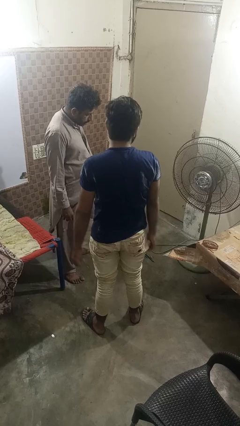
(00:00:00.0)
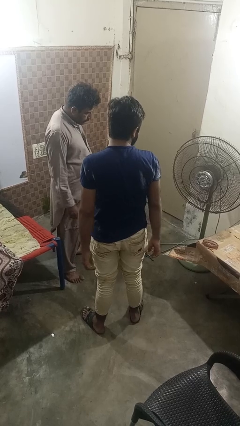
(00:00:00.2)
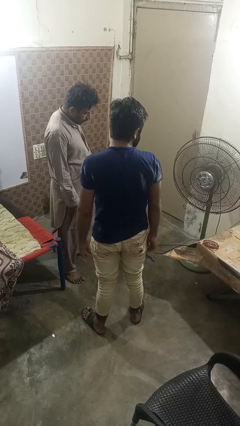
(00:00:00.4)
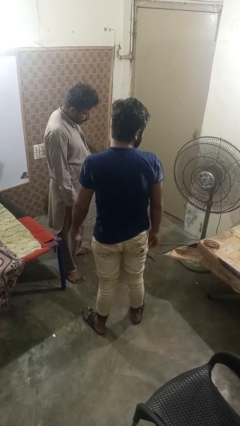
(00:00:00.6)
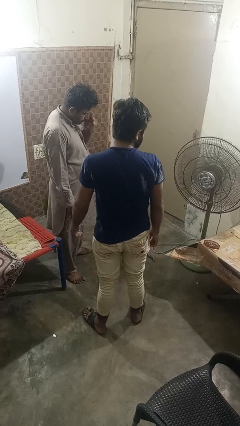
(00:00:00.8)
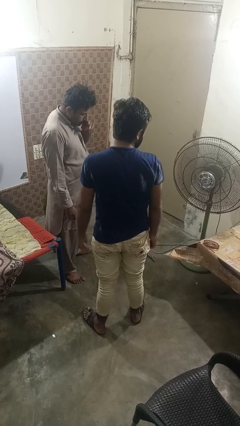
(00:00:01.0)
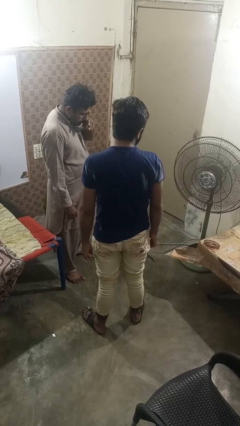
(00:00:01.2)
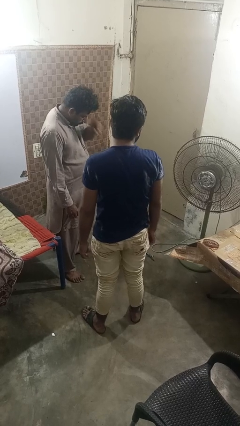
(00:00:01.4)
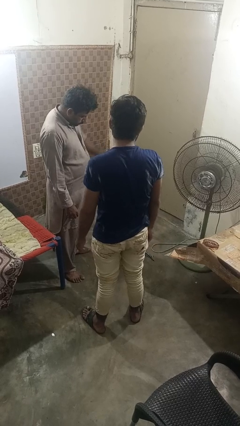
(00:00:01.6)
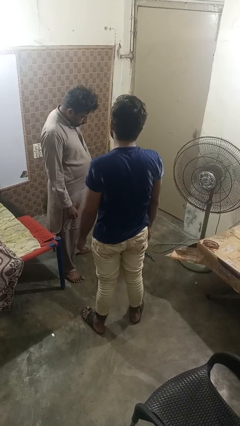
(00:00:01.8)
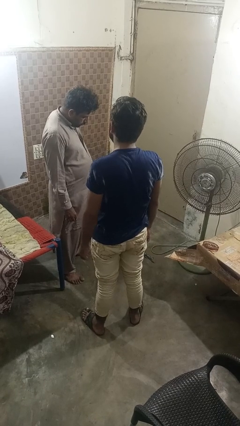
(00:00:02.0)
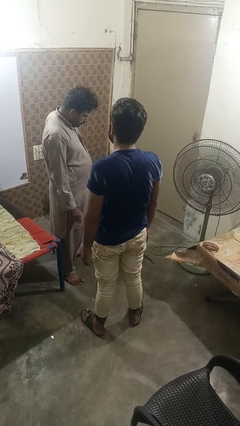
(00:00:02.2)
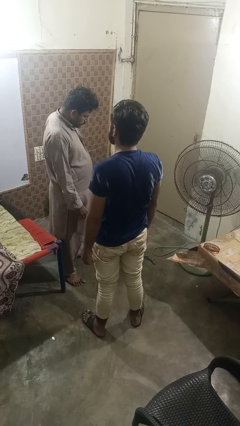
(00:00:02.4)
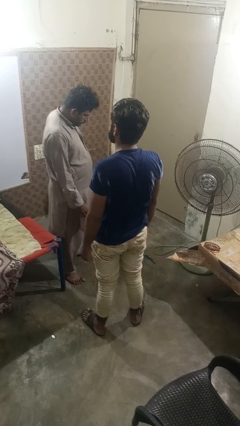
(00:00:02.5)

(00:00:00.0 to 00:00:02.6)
person grabs person by hair

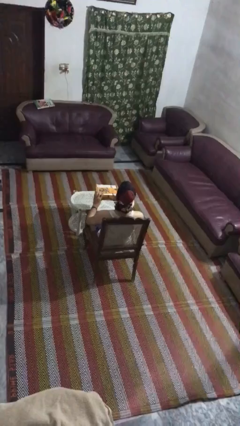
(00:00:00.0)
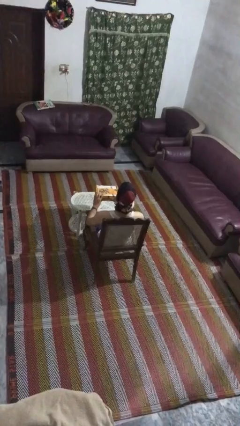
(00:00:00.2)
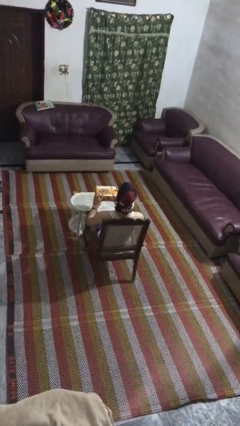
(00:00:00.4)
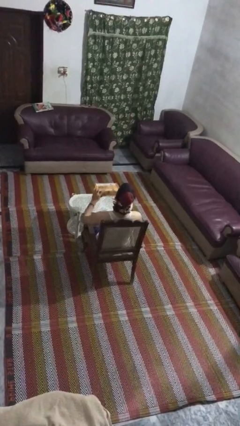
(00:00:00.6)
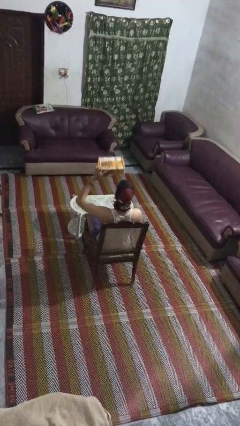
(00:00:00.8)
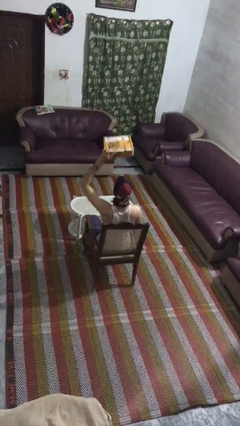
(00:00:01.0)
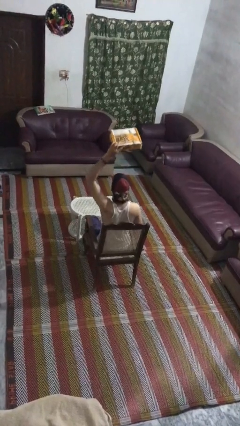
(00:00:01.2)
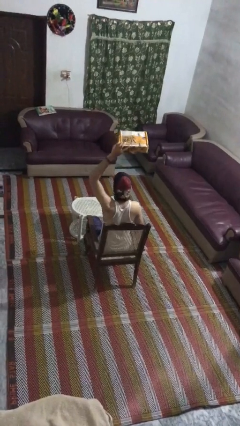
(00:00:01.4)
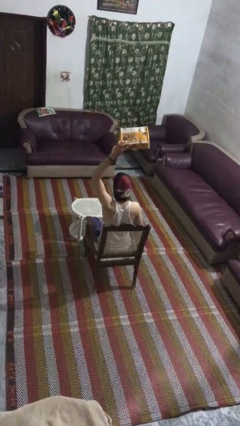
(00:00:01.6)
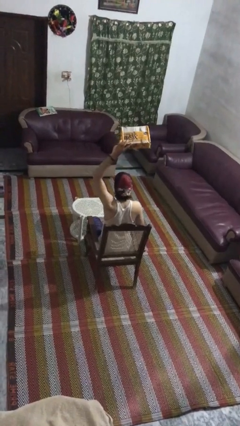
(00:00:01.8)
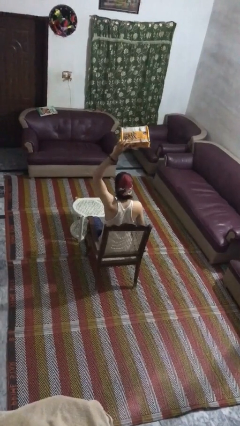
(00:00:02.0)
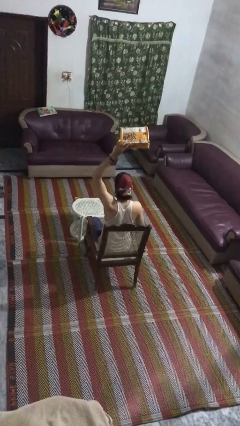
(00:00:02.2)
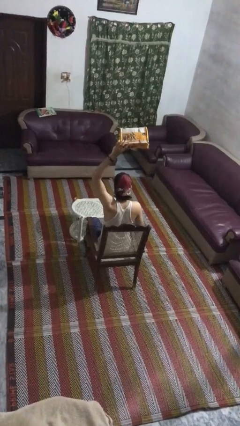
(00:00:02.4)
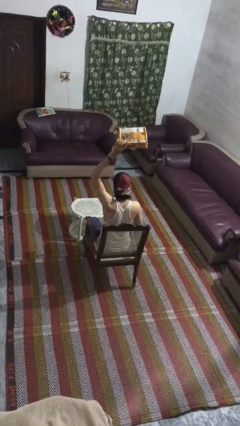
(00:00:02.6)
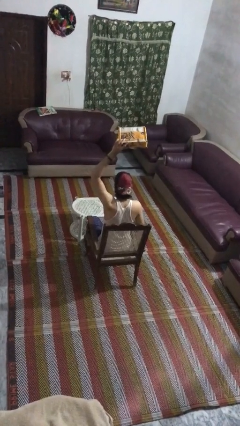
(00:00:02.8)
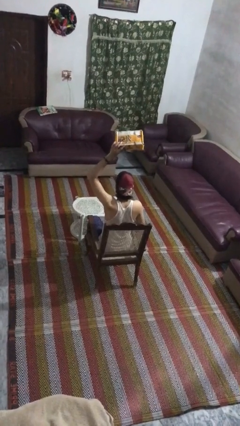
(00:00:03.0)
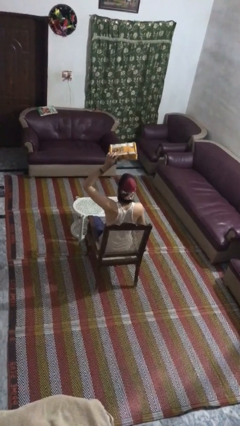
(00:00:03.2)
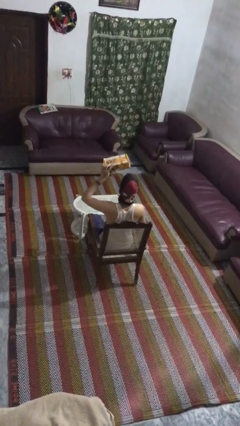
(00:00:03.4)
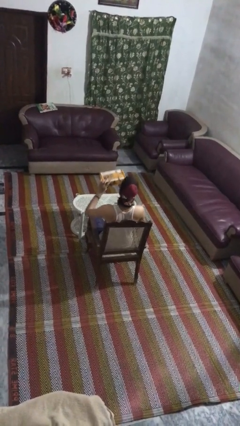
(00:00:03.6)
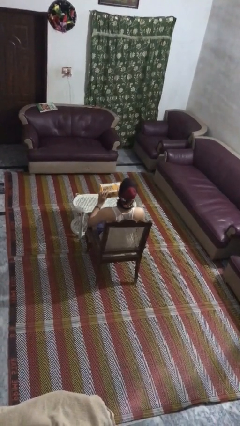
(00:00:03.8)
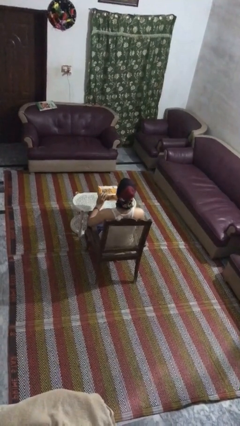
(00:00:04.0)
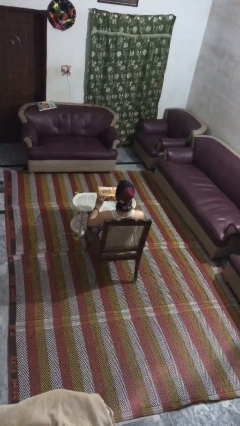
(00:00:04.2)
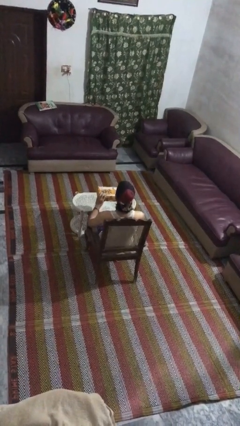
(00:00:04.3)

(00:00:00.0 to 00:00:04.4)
person holds object above head

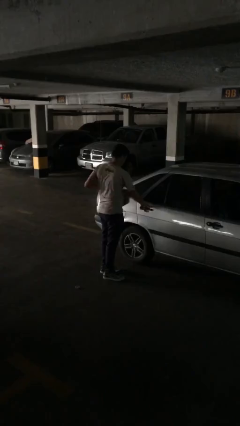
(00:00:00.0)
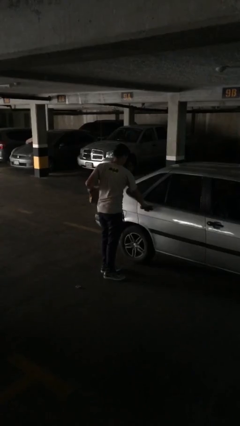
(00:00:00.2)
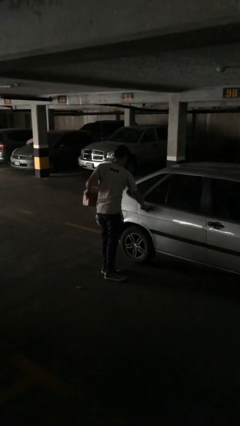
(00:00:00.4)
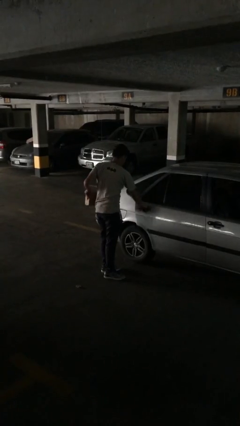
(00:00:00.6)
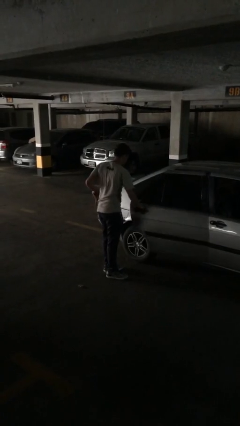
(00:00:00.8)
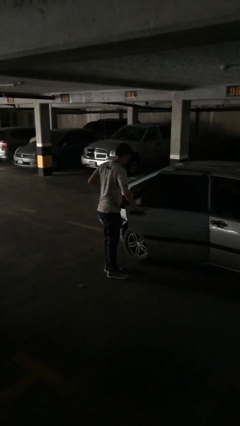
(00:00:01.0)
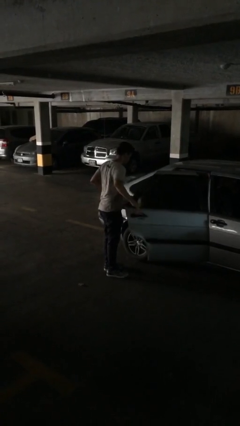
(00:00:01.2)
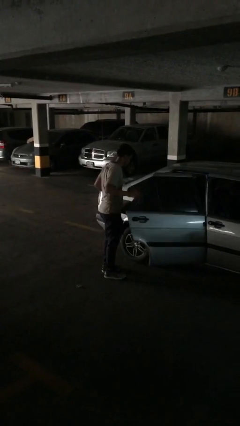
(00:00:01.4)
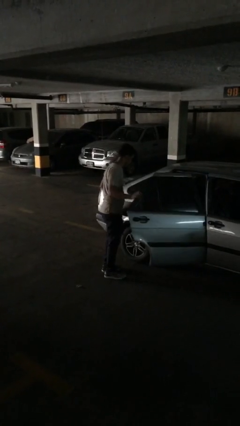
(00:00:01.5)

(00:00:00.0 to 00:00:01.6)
person opens car door

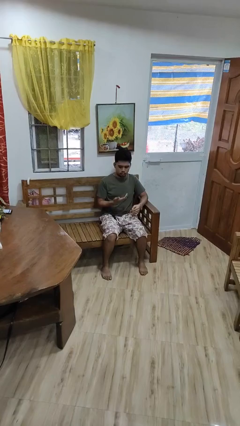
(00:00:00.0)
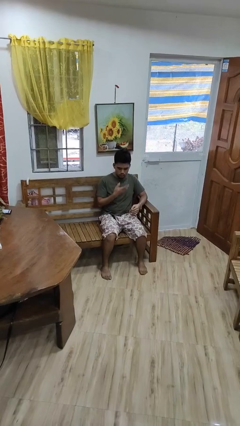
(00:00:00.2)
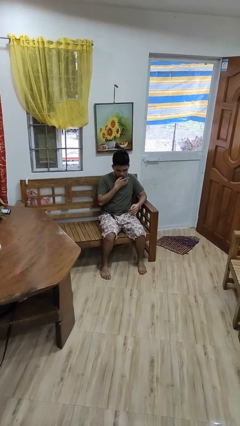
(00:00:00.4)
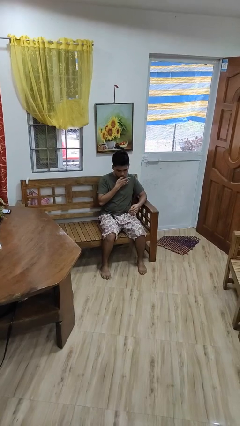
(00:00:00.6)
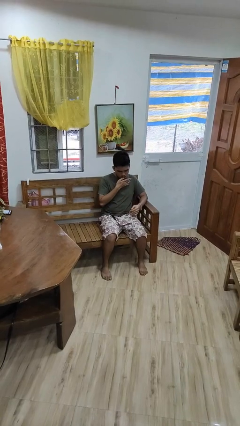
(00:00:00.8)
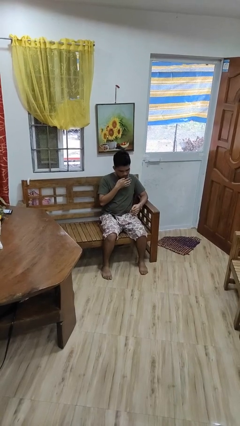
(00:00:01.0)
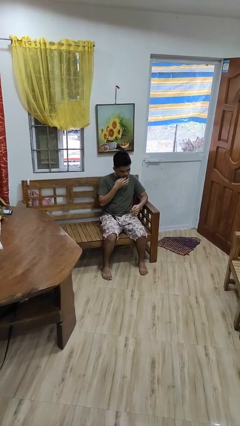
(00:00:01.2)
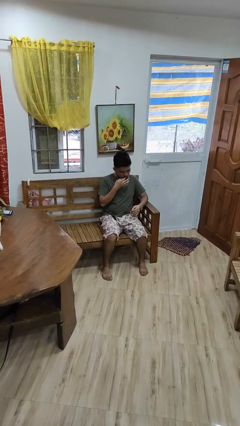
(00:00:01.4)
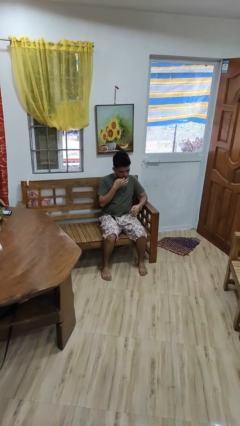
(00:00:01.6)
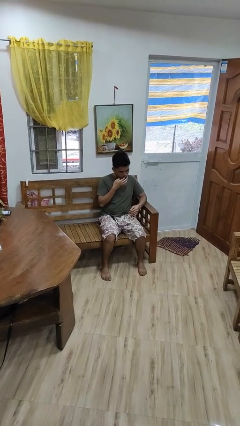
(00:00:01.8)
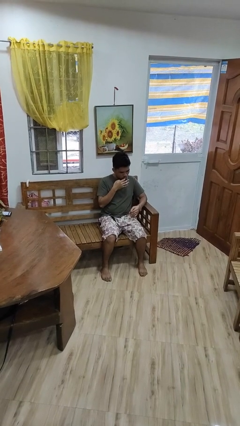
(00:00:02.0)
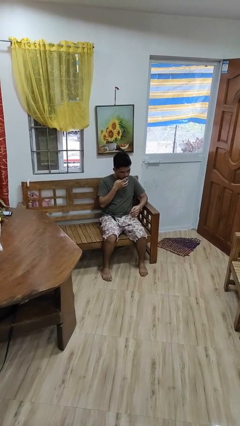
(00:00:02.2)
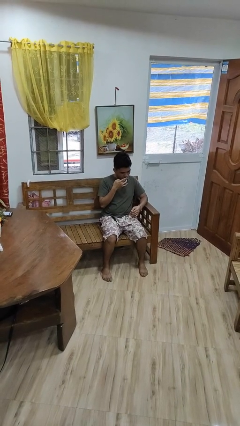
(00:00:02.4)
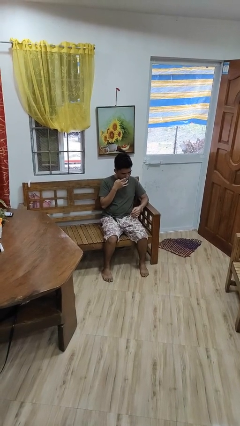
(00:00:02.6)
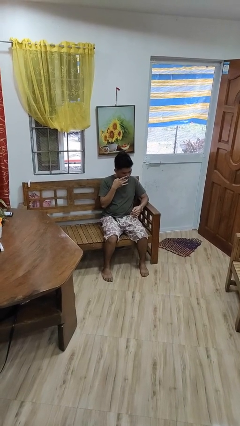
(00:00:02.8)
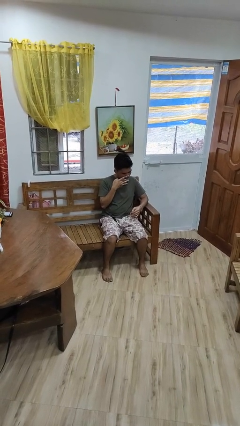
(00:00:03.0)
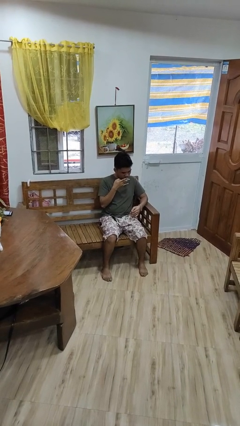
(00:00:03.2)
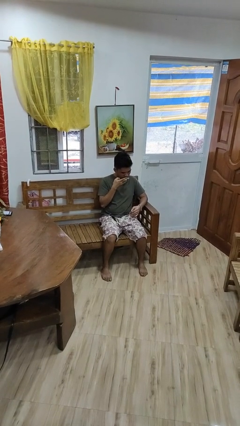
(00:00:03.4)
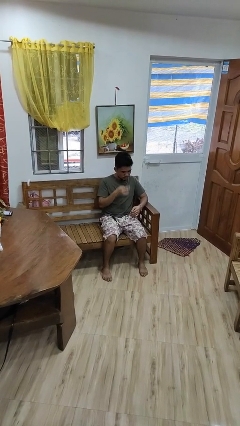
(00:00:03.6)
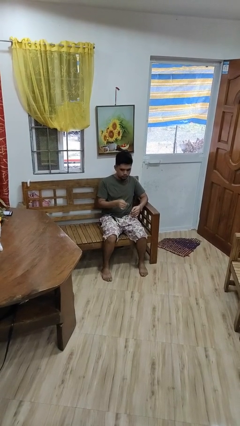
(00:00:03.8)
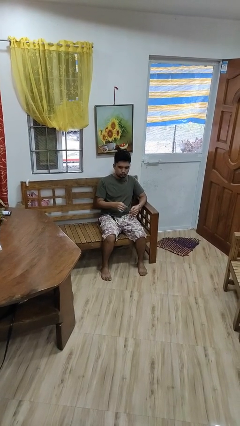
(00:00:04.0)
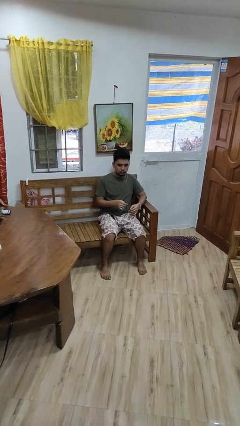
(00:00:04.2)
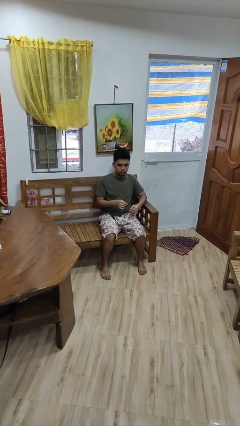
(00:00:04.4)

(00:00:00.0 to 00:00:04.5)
person licks fingers

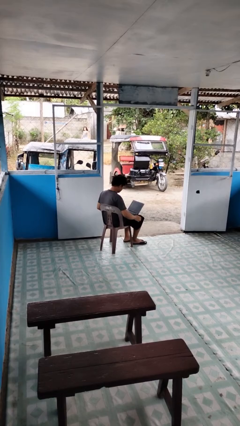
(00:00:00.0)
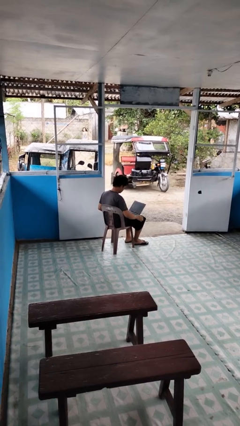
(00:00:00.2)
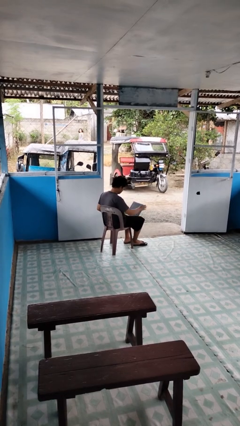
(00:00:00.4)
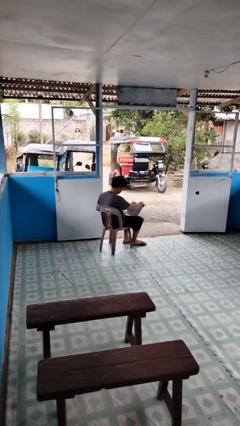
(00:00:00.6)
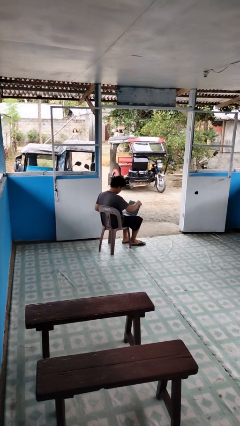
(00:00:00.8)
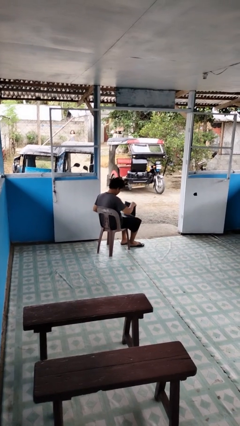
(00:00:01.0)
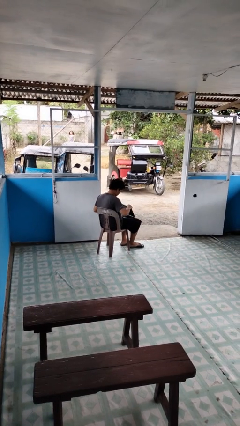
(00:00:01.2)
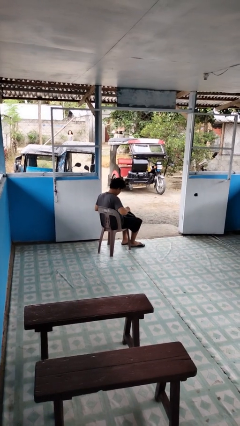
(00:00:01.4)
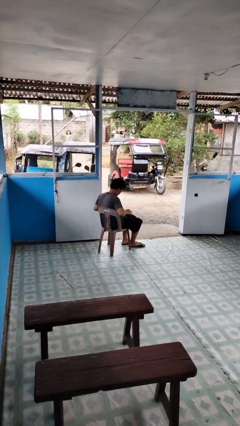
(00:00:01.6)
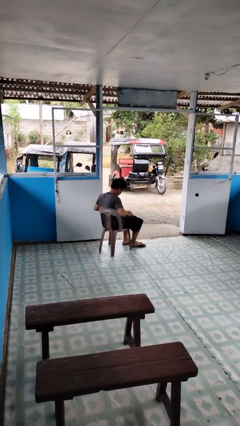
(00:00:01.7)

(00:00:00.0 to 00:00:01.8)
person closes laptop

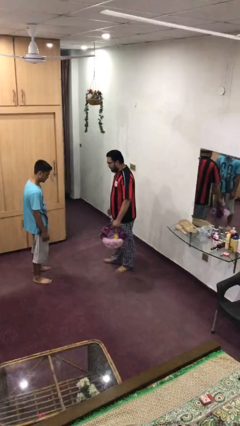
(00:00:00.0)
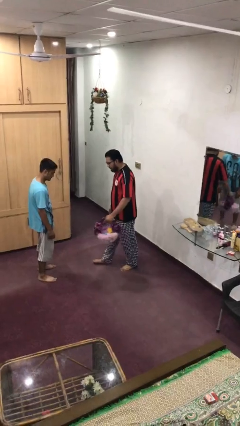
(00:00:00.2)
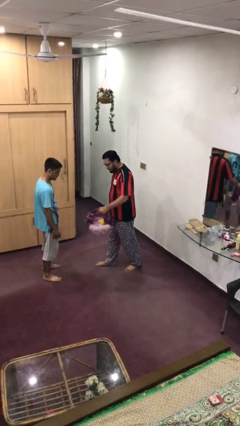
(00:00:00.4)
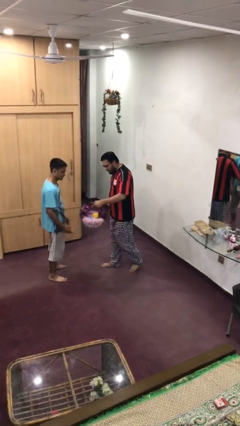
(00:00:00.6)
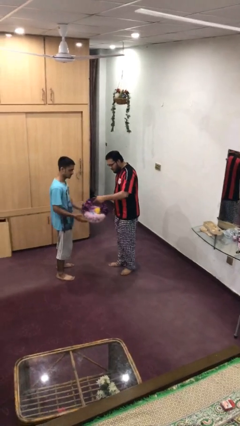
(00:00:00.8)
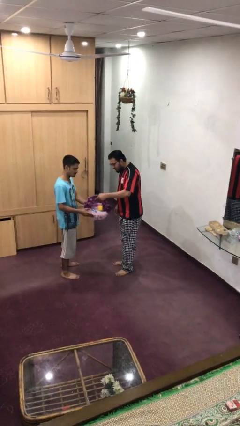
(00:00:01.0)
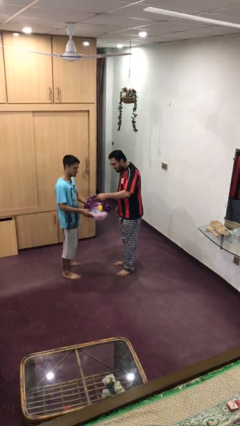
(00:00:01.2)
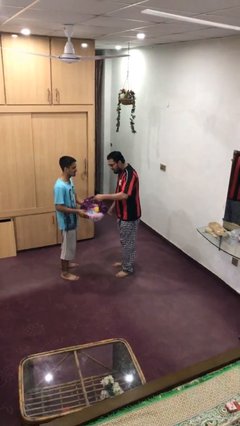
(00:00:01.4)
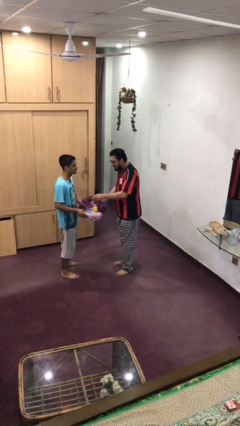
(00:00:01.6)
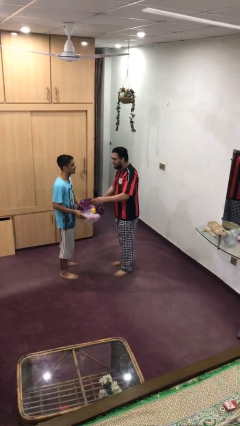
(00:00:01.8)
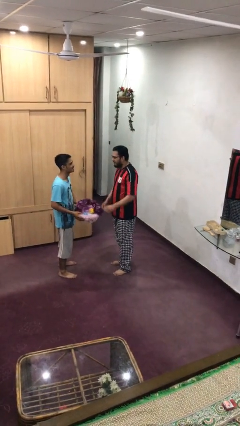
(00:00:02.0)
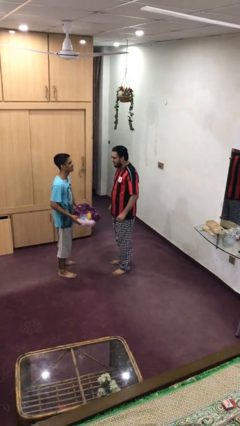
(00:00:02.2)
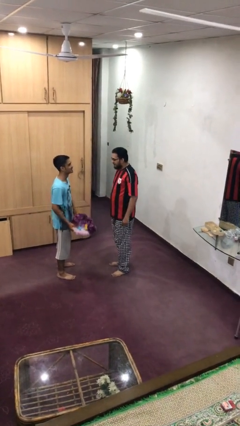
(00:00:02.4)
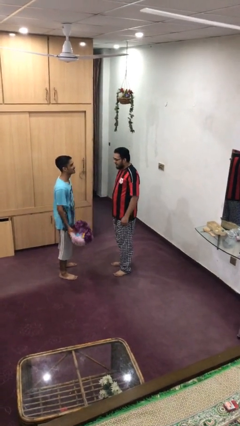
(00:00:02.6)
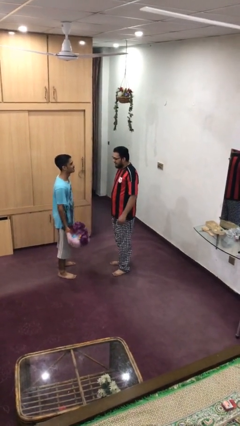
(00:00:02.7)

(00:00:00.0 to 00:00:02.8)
person transfers object to person
